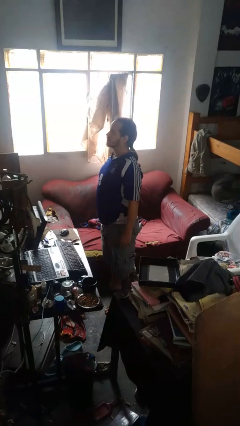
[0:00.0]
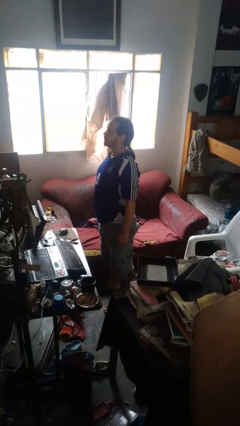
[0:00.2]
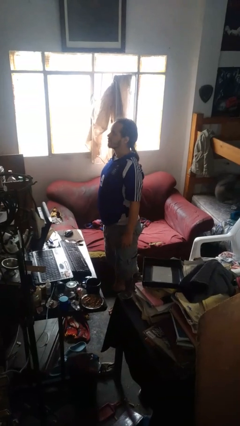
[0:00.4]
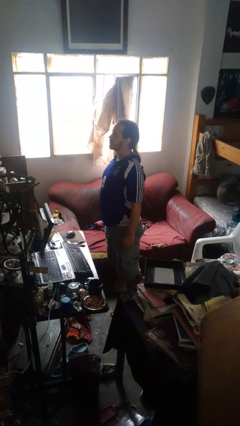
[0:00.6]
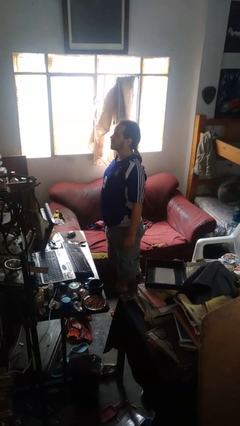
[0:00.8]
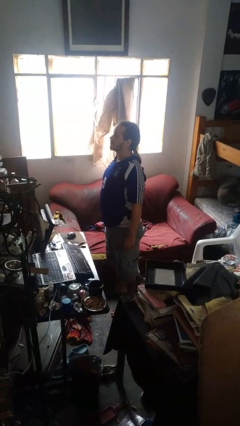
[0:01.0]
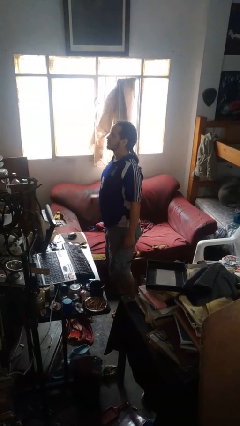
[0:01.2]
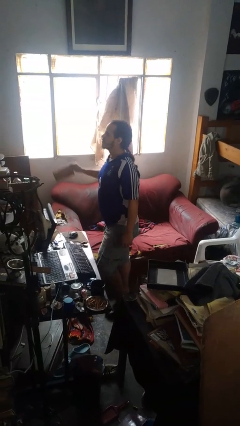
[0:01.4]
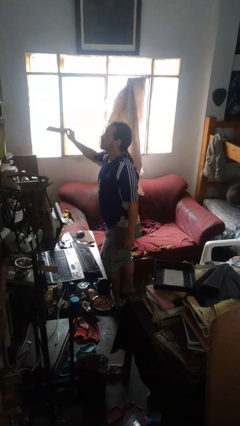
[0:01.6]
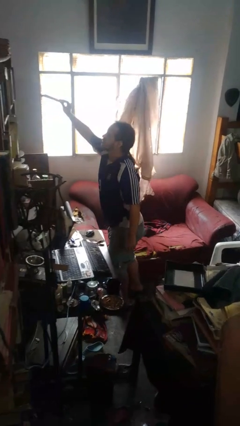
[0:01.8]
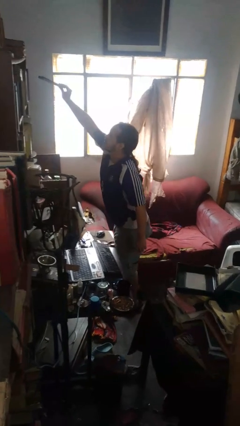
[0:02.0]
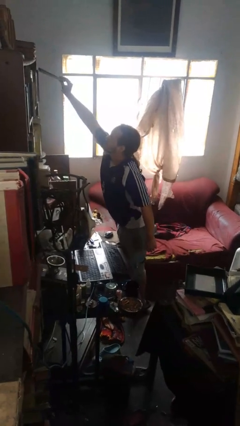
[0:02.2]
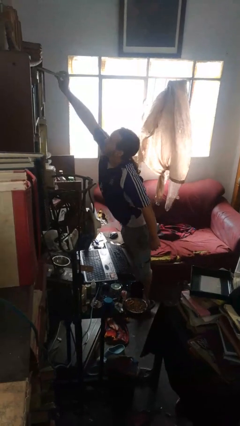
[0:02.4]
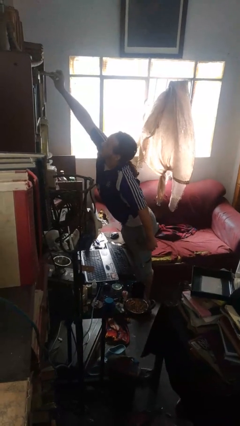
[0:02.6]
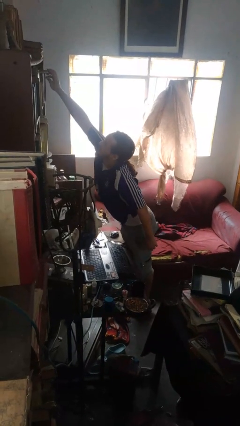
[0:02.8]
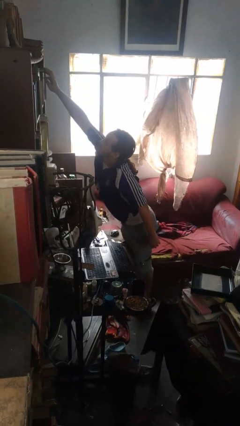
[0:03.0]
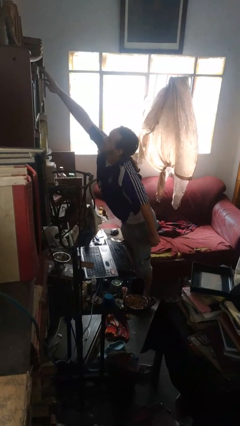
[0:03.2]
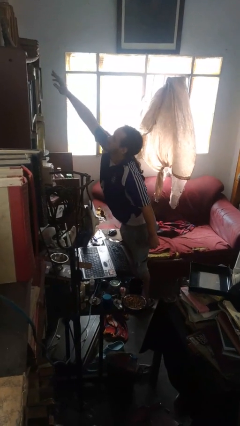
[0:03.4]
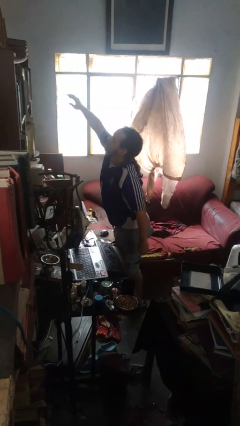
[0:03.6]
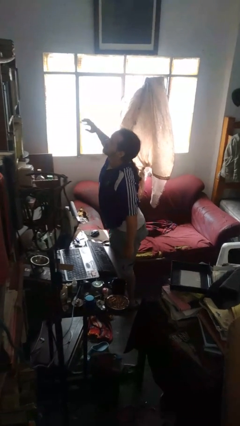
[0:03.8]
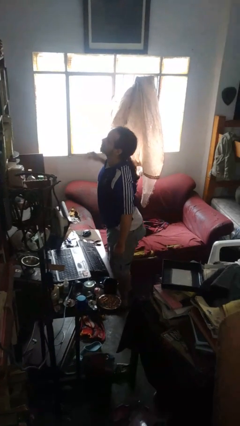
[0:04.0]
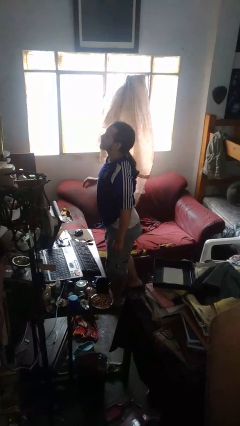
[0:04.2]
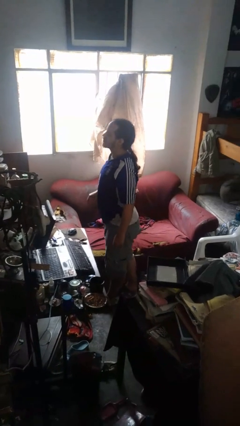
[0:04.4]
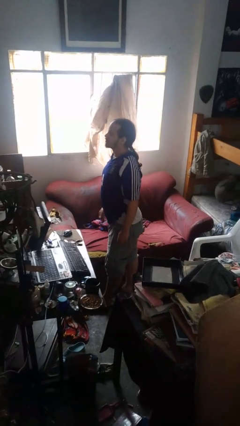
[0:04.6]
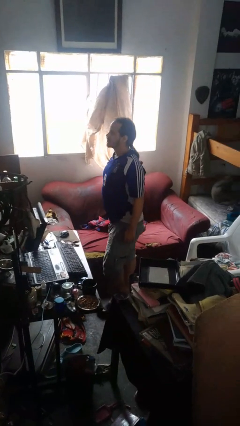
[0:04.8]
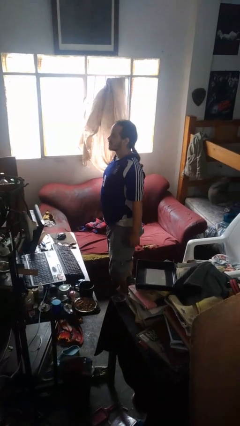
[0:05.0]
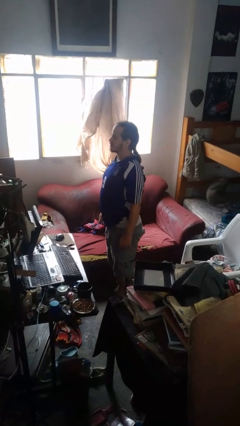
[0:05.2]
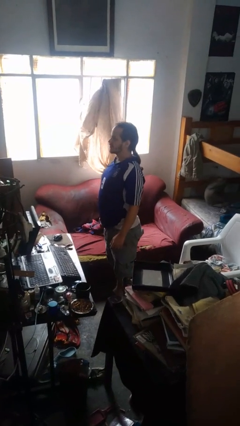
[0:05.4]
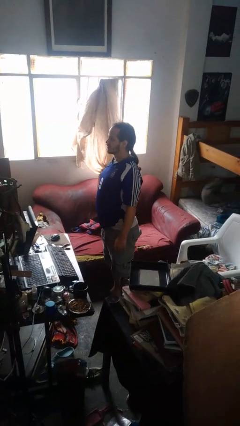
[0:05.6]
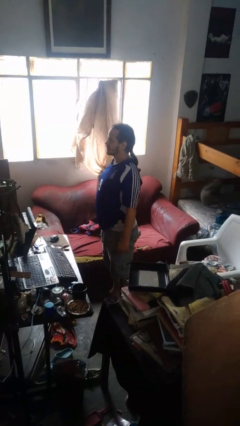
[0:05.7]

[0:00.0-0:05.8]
person puts down object on shelf

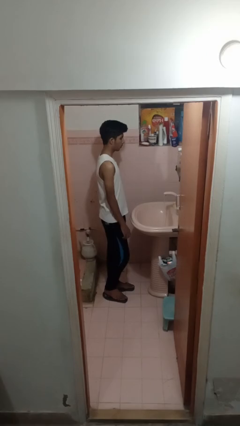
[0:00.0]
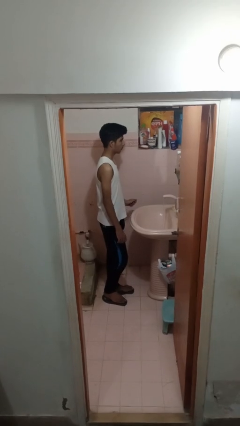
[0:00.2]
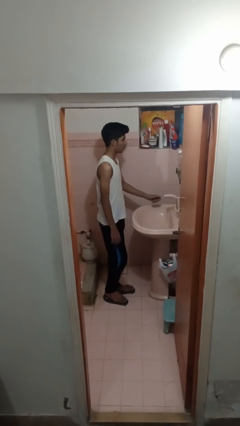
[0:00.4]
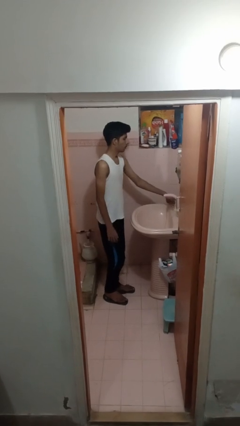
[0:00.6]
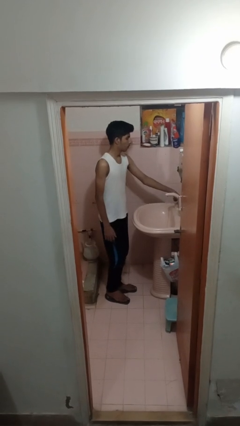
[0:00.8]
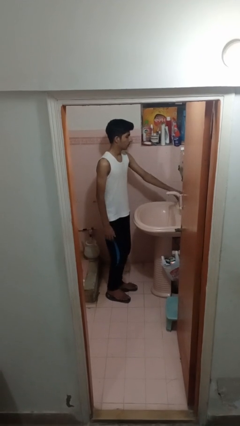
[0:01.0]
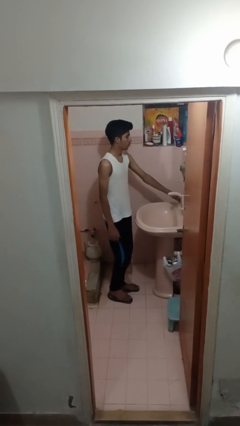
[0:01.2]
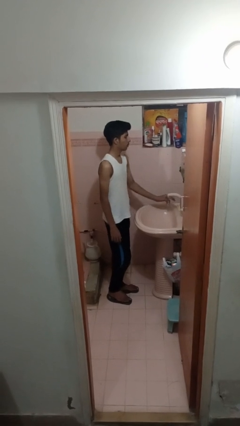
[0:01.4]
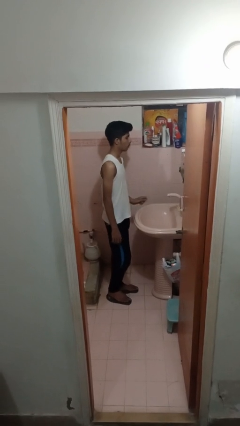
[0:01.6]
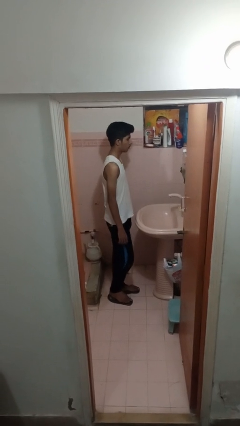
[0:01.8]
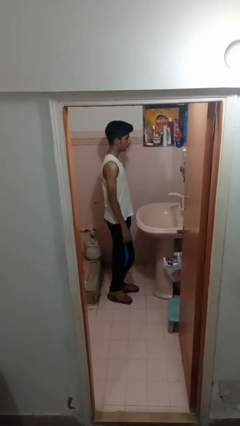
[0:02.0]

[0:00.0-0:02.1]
person turns off faucet

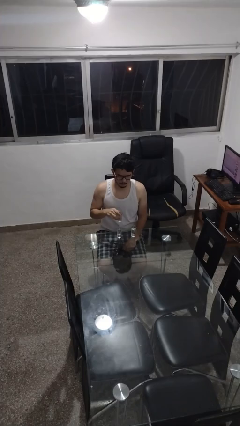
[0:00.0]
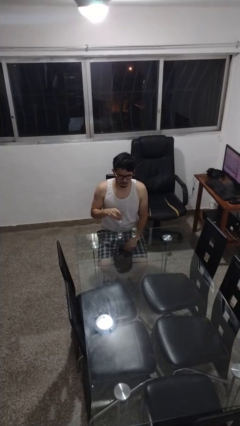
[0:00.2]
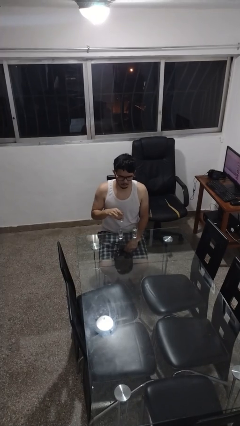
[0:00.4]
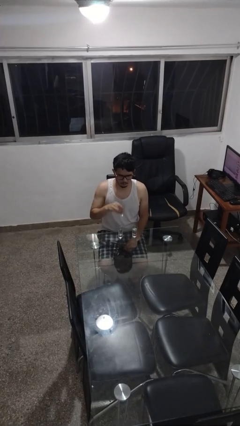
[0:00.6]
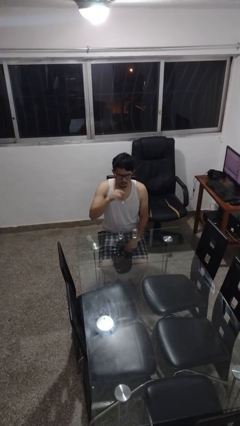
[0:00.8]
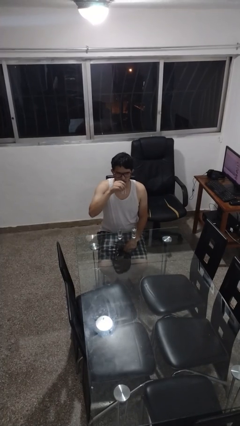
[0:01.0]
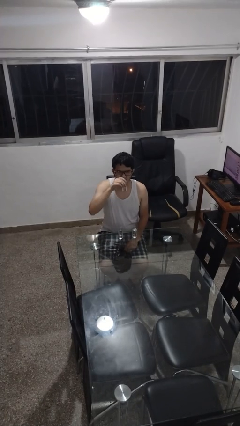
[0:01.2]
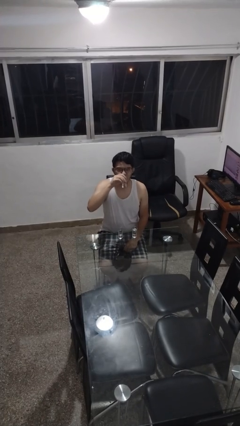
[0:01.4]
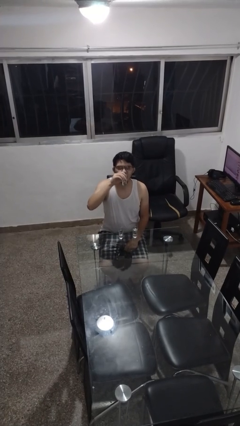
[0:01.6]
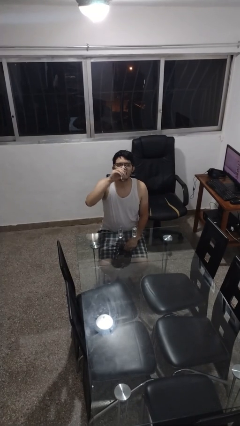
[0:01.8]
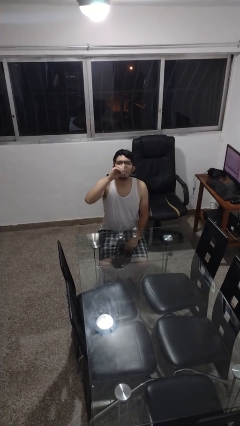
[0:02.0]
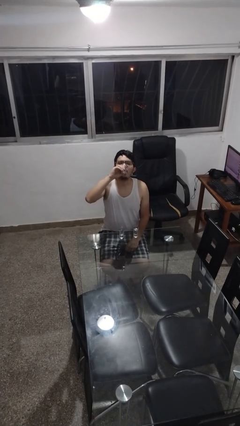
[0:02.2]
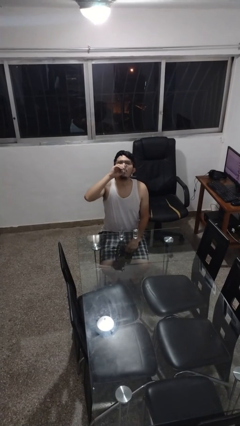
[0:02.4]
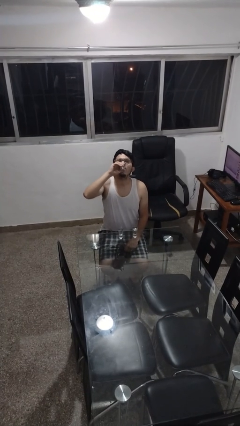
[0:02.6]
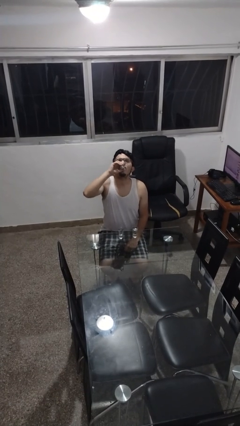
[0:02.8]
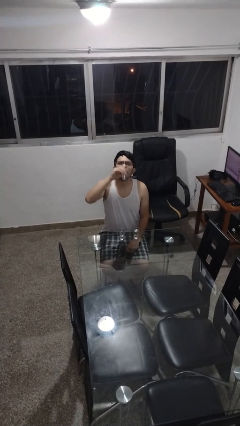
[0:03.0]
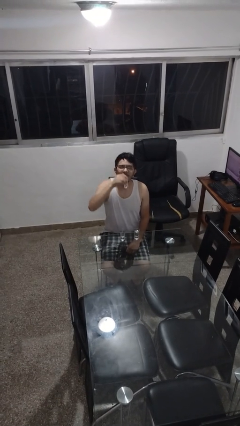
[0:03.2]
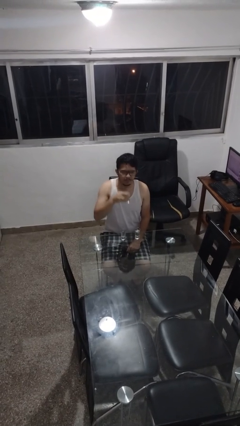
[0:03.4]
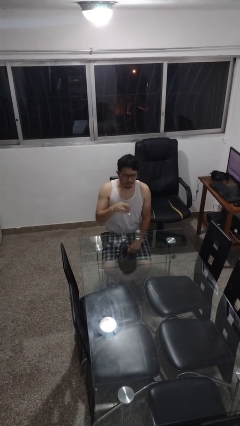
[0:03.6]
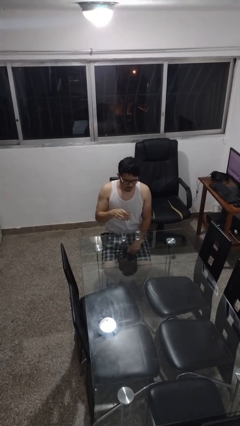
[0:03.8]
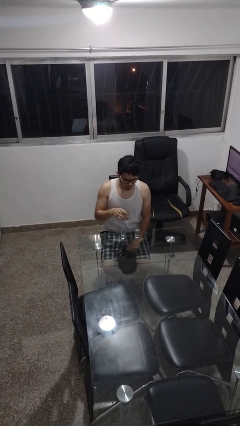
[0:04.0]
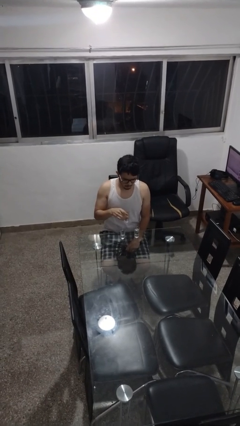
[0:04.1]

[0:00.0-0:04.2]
person drinks from shotglass

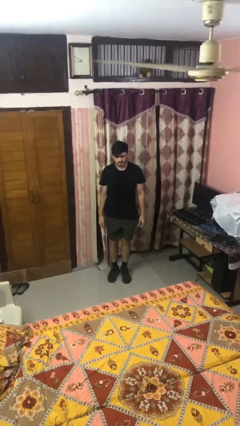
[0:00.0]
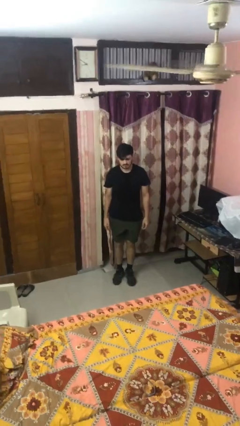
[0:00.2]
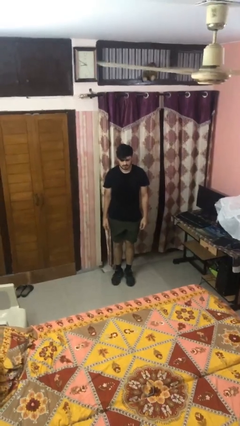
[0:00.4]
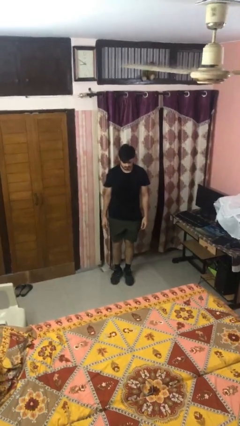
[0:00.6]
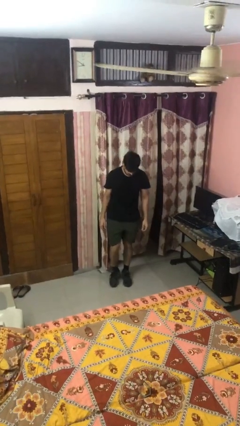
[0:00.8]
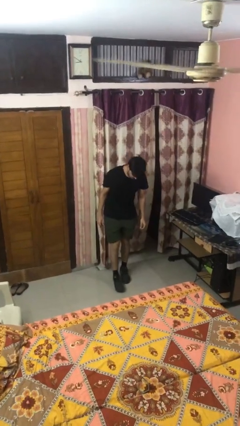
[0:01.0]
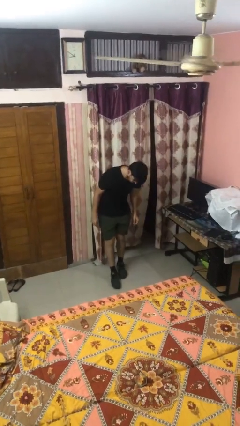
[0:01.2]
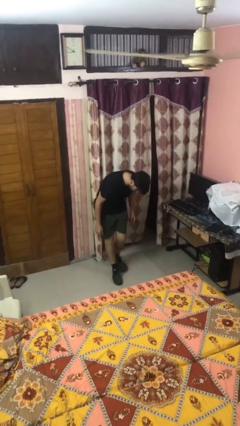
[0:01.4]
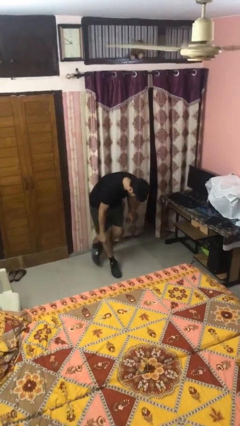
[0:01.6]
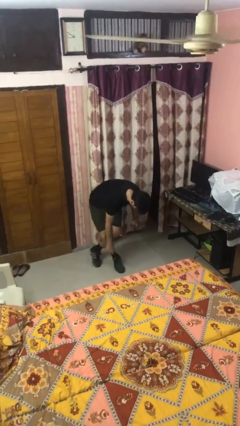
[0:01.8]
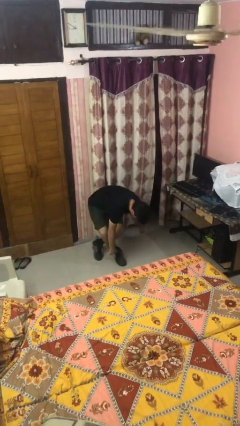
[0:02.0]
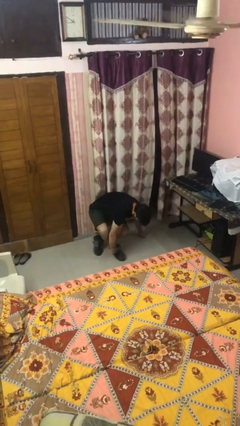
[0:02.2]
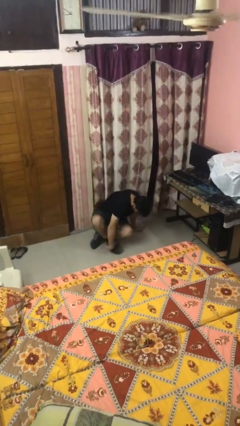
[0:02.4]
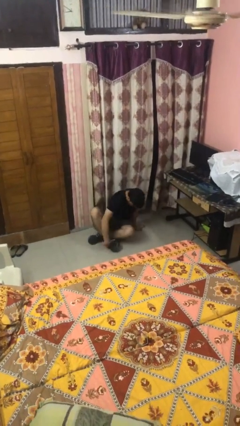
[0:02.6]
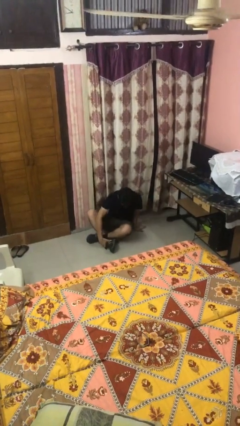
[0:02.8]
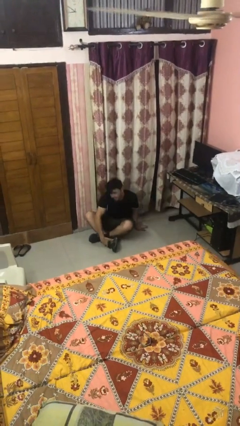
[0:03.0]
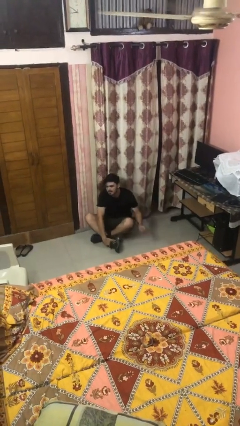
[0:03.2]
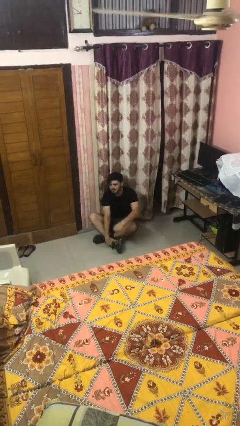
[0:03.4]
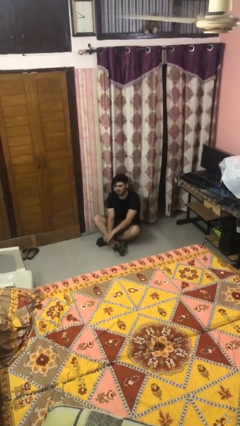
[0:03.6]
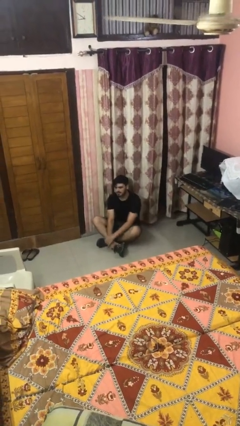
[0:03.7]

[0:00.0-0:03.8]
person sits crisscross

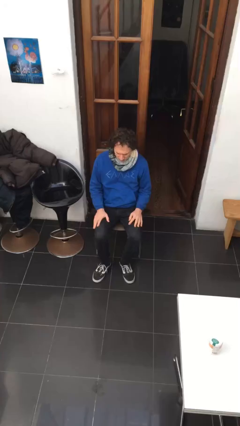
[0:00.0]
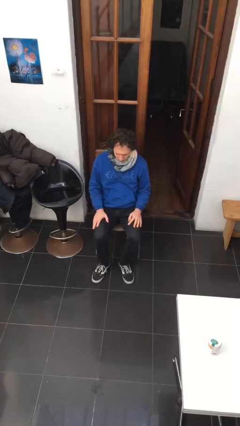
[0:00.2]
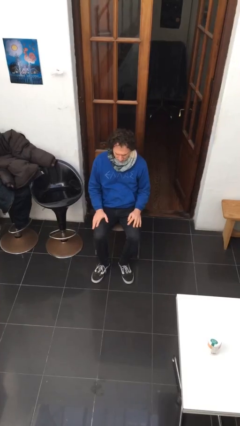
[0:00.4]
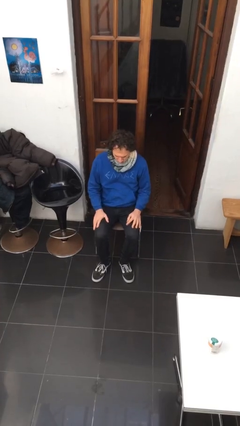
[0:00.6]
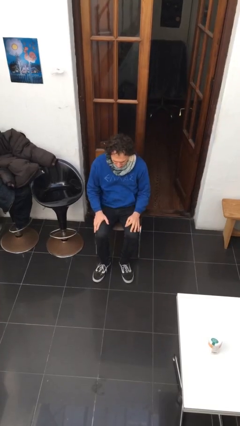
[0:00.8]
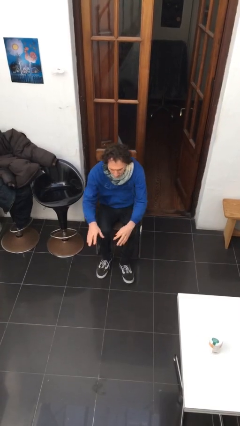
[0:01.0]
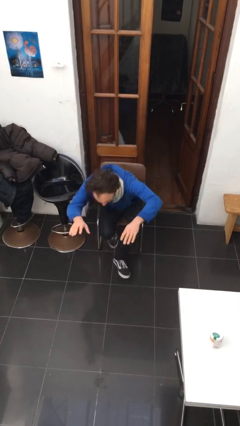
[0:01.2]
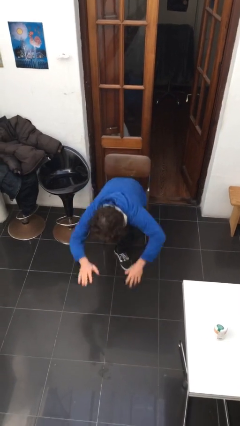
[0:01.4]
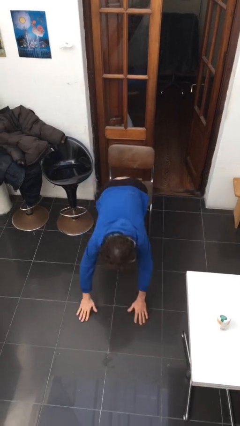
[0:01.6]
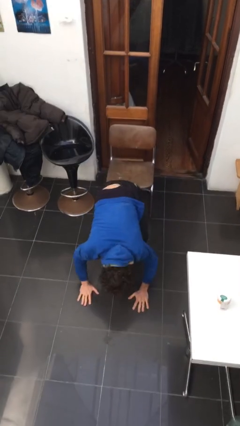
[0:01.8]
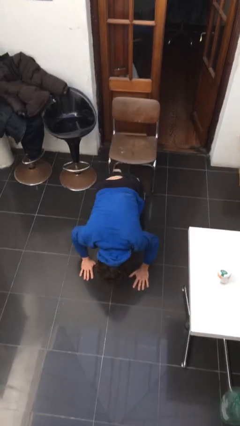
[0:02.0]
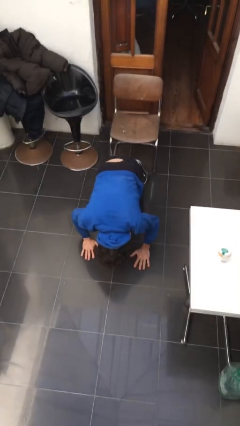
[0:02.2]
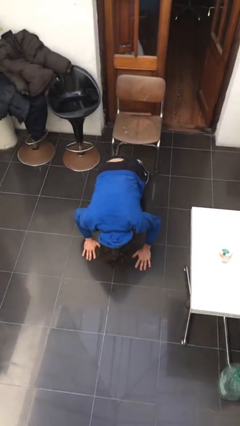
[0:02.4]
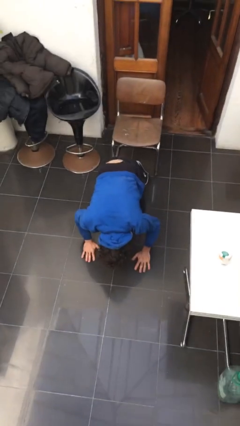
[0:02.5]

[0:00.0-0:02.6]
person falls from chair
